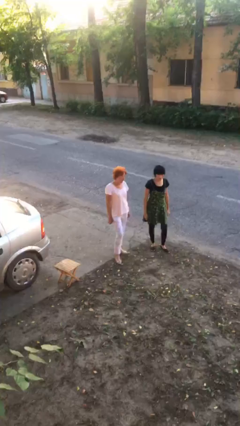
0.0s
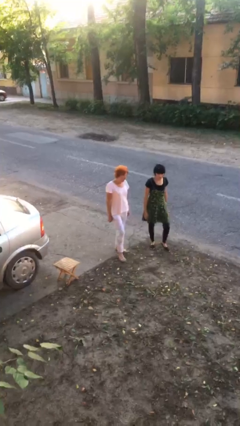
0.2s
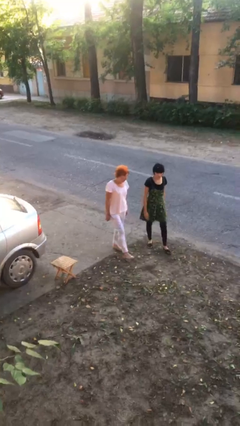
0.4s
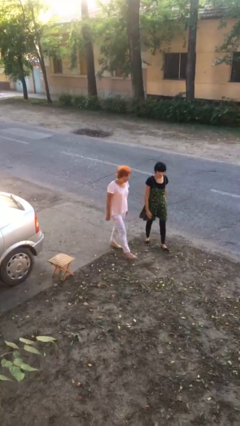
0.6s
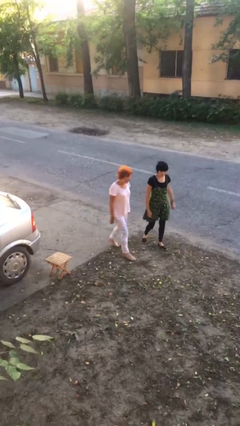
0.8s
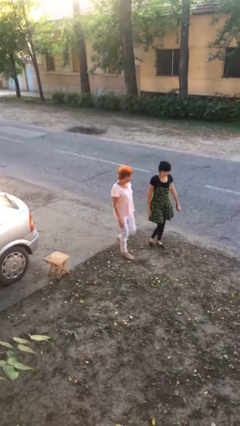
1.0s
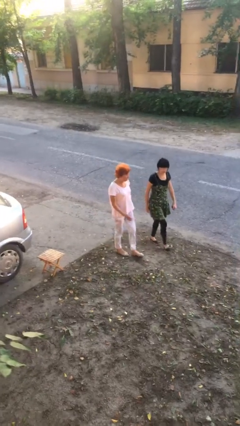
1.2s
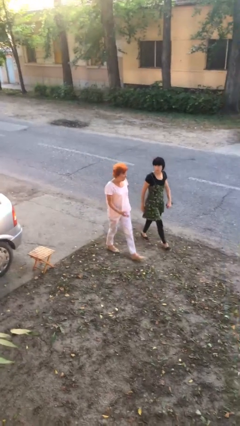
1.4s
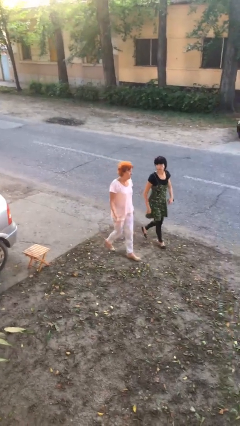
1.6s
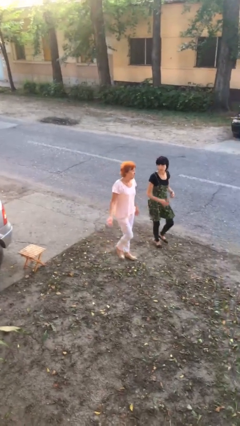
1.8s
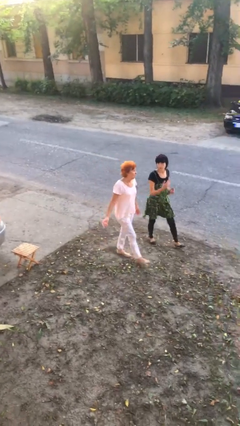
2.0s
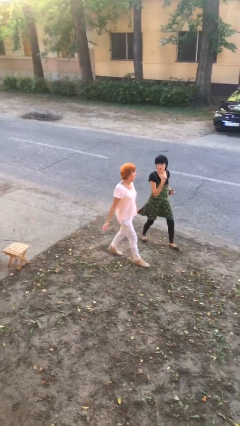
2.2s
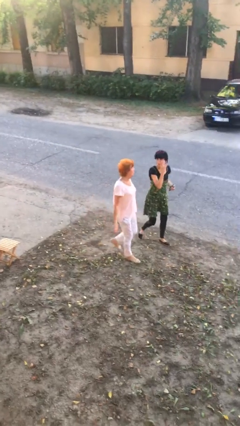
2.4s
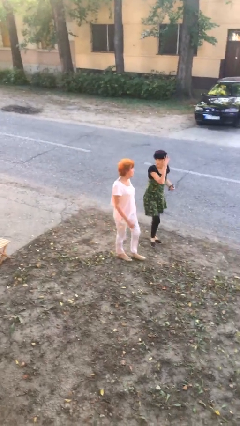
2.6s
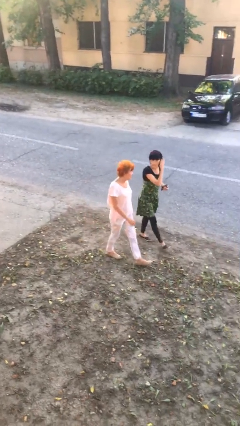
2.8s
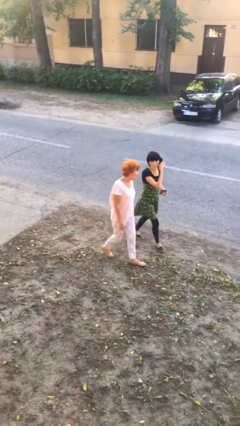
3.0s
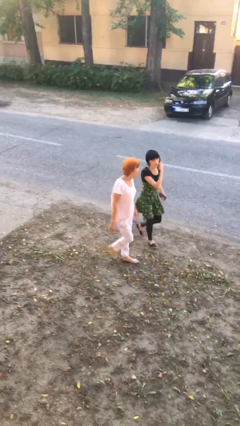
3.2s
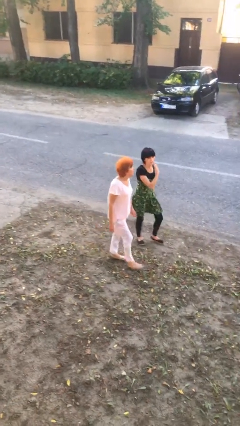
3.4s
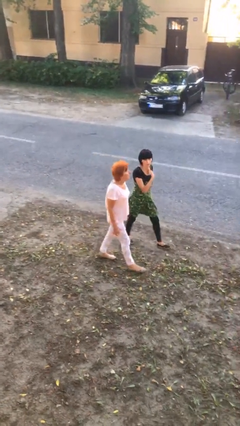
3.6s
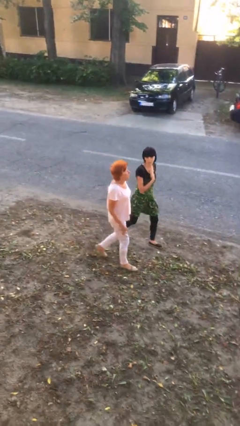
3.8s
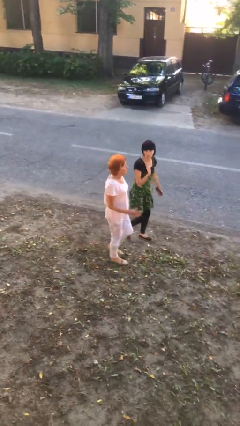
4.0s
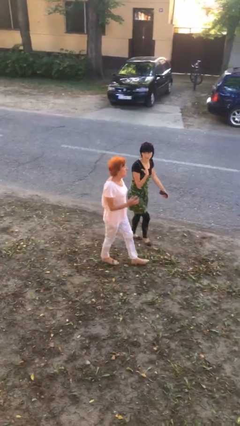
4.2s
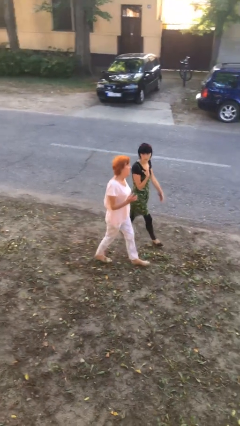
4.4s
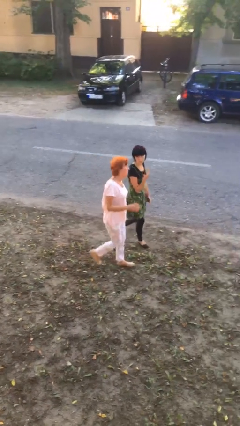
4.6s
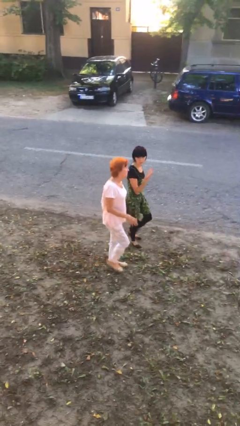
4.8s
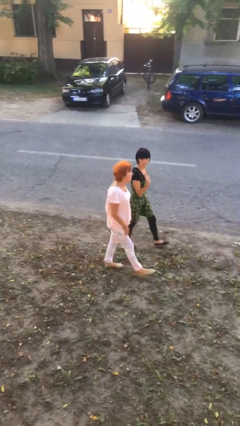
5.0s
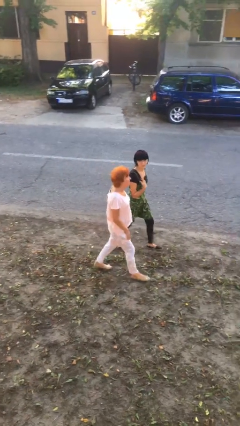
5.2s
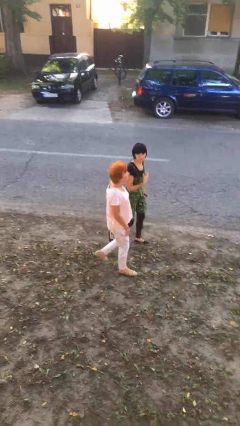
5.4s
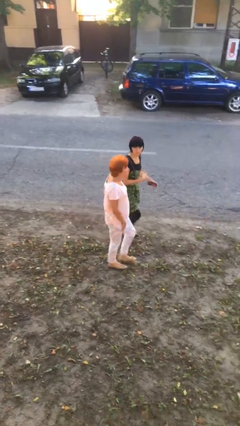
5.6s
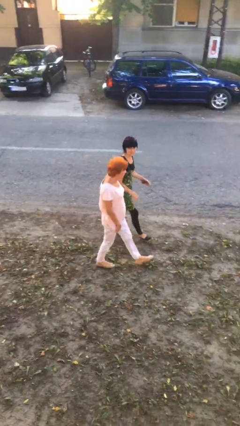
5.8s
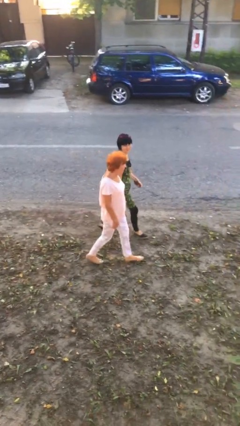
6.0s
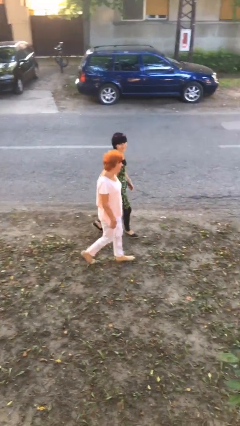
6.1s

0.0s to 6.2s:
person talks to person

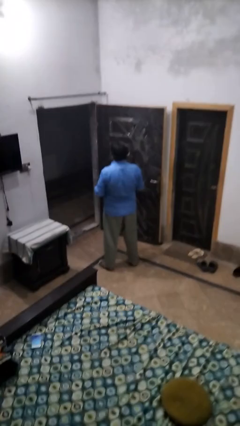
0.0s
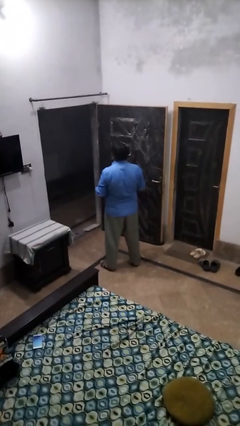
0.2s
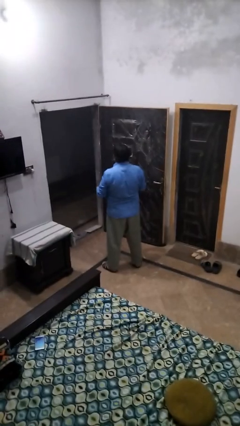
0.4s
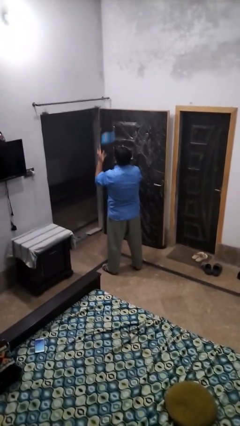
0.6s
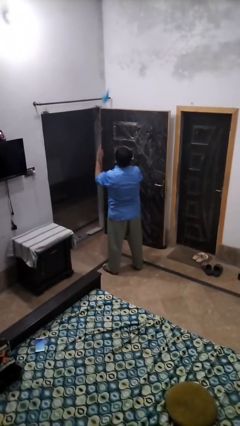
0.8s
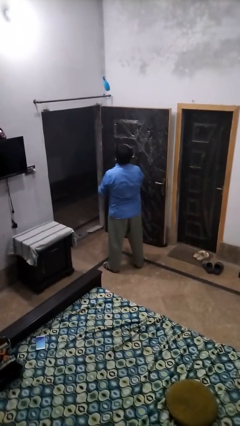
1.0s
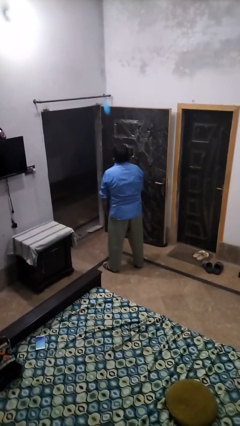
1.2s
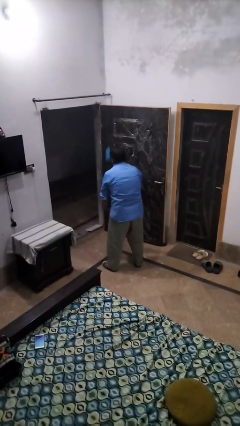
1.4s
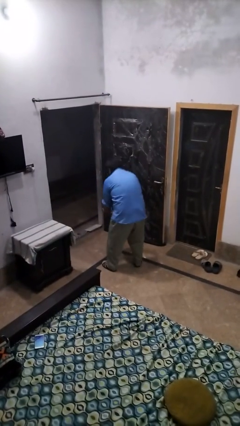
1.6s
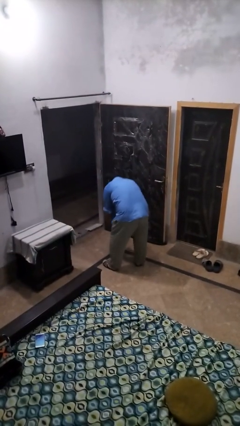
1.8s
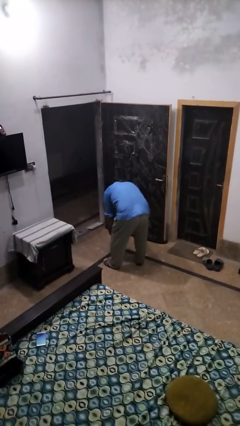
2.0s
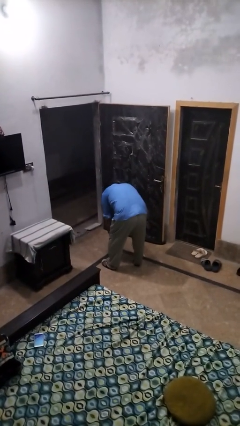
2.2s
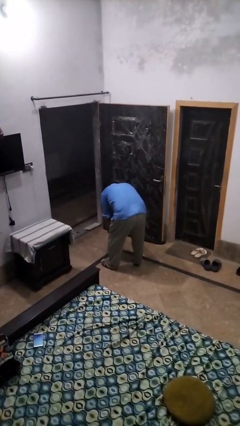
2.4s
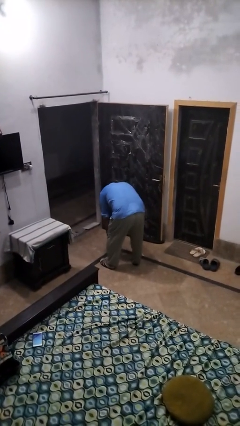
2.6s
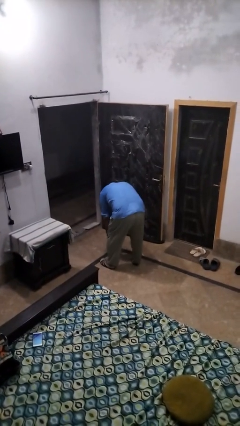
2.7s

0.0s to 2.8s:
person drops object

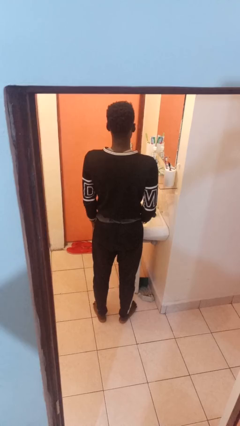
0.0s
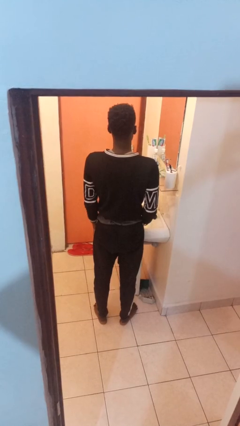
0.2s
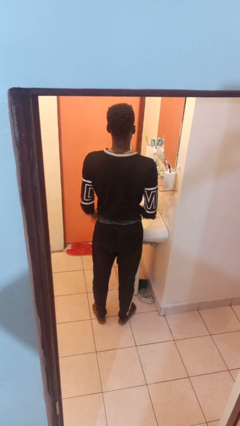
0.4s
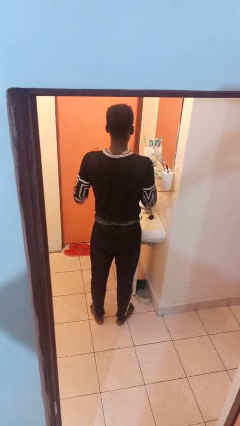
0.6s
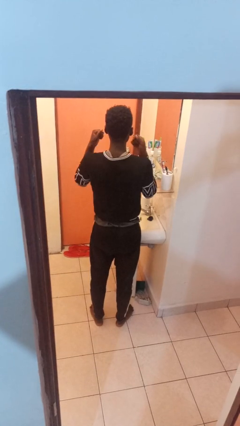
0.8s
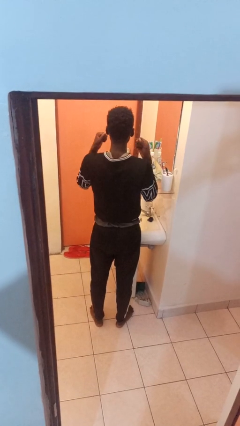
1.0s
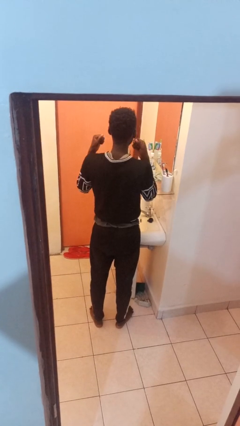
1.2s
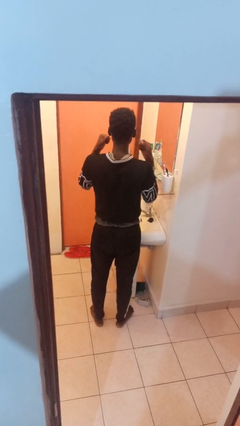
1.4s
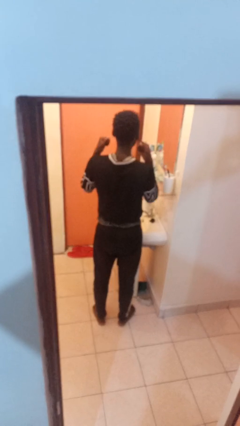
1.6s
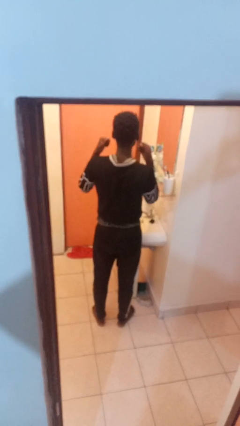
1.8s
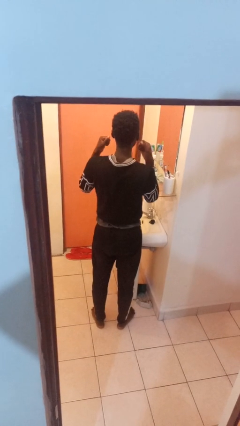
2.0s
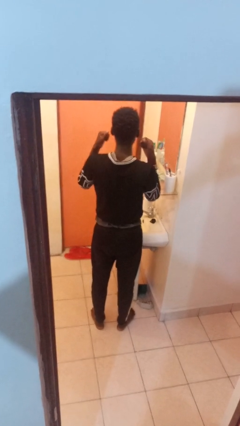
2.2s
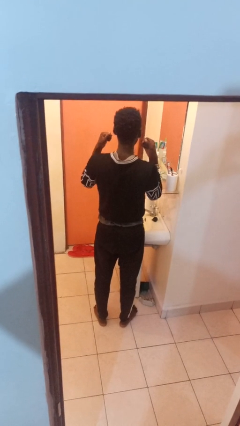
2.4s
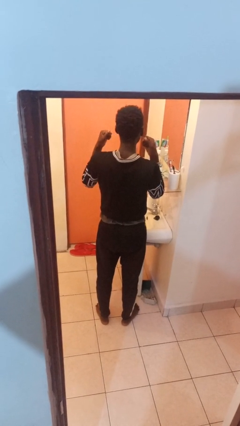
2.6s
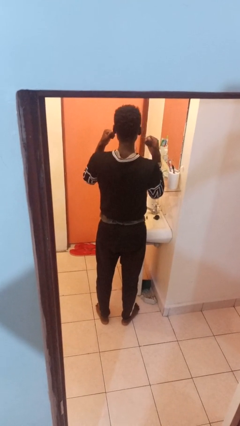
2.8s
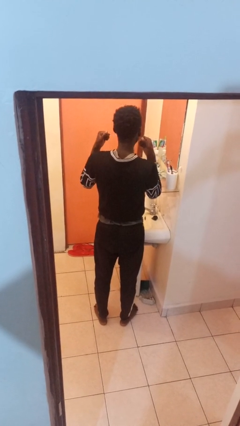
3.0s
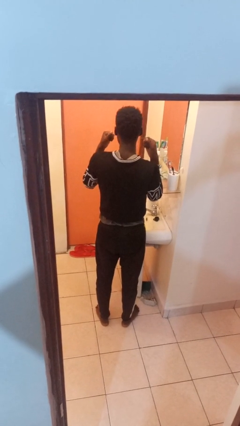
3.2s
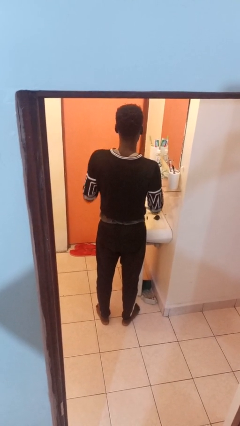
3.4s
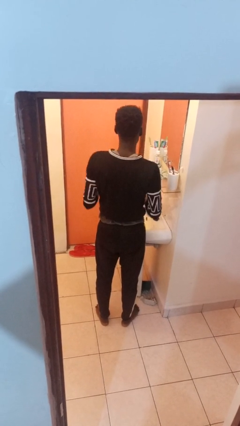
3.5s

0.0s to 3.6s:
person flosses

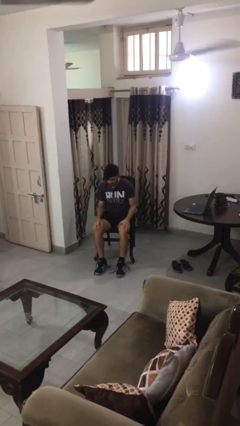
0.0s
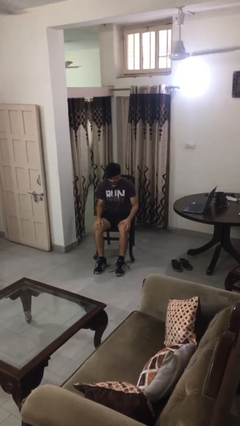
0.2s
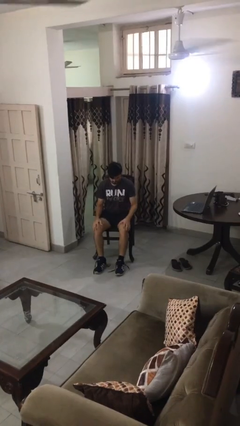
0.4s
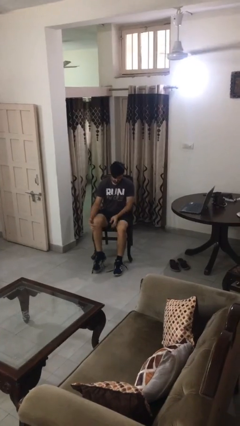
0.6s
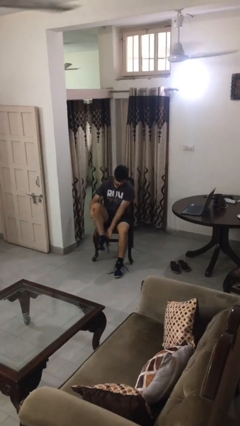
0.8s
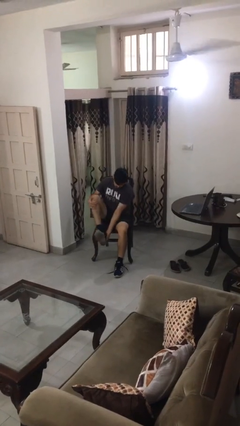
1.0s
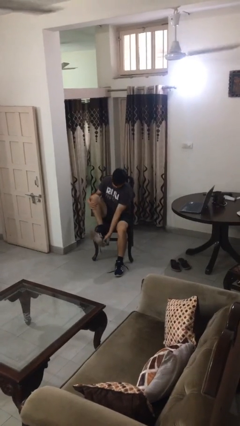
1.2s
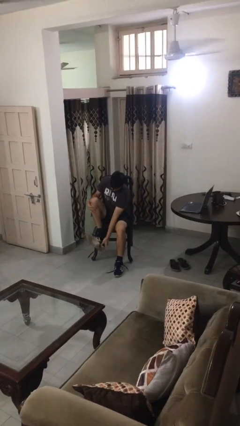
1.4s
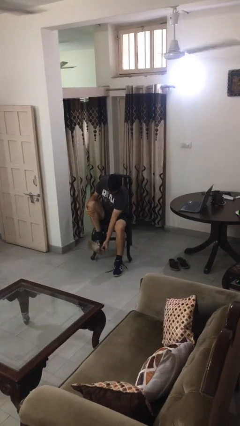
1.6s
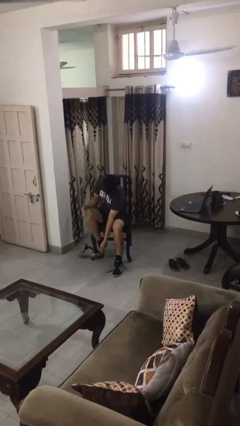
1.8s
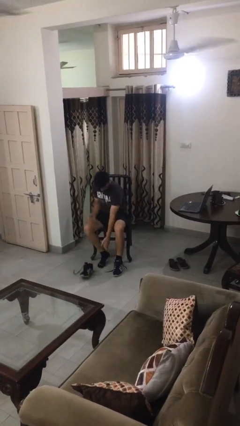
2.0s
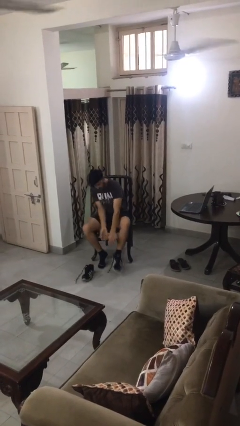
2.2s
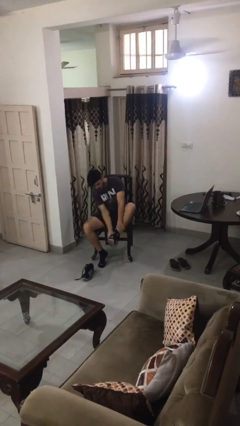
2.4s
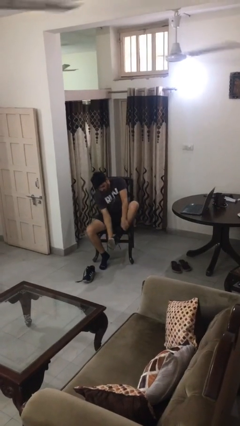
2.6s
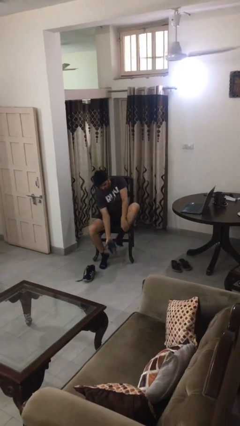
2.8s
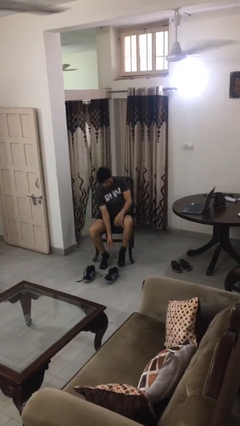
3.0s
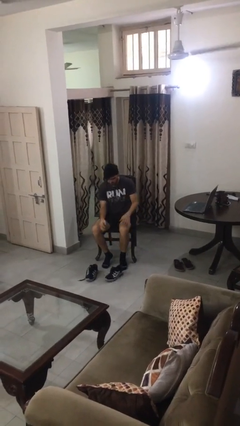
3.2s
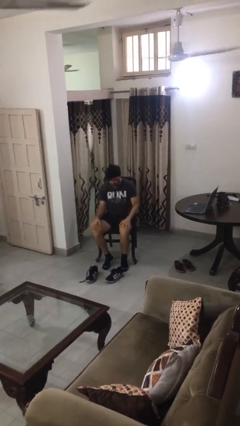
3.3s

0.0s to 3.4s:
person takes off shoes

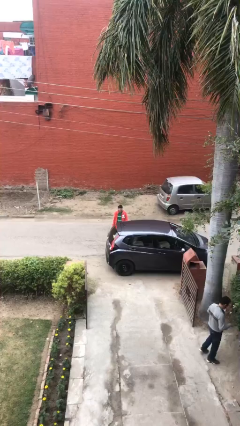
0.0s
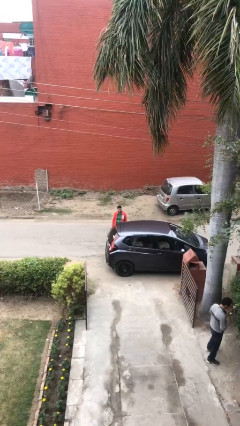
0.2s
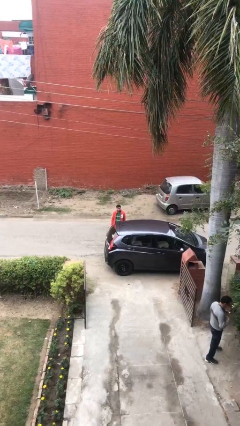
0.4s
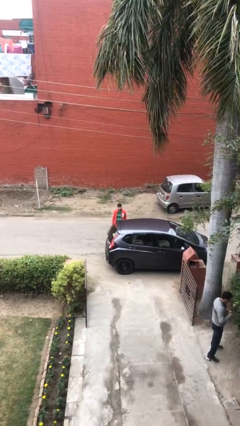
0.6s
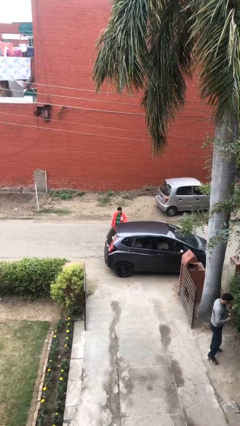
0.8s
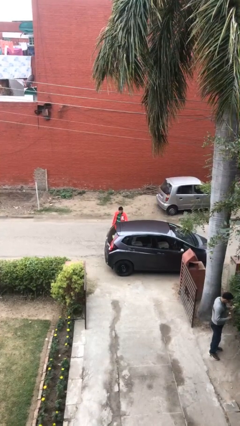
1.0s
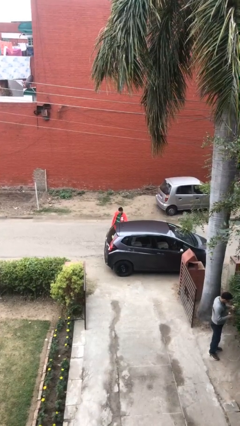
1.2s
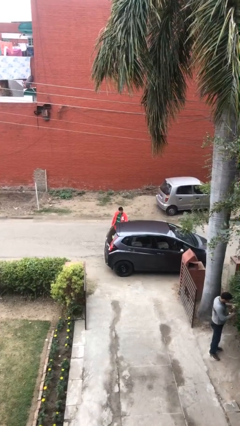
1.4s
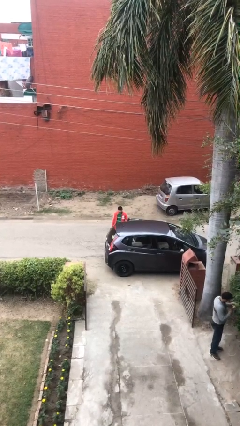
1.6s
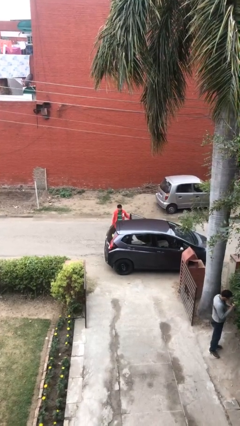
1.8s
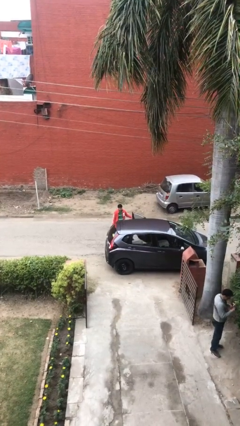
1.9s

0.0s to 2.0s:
person opens car door
